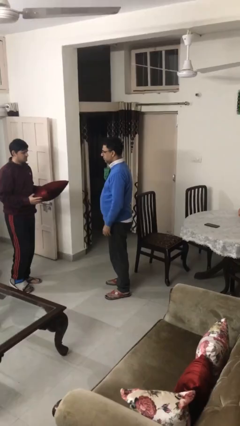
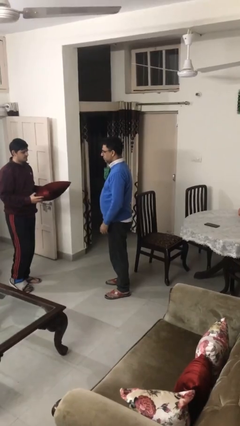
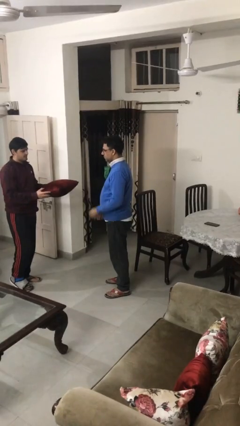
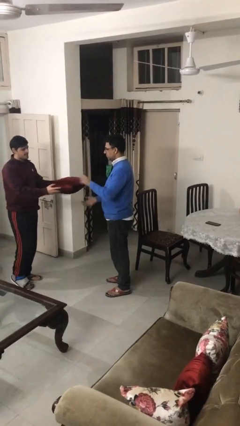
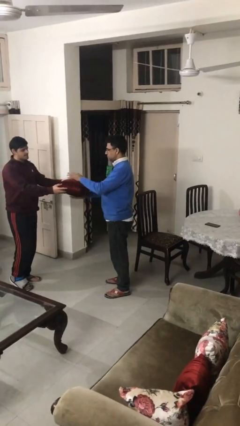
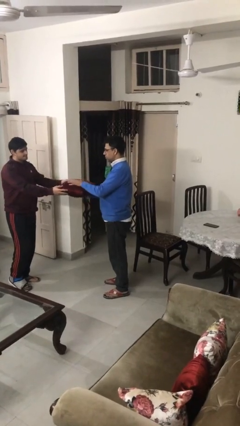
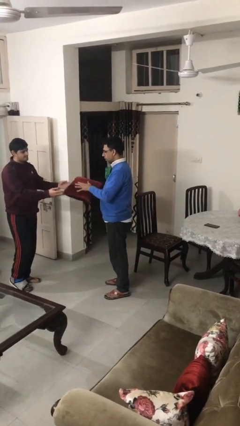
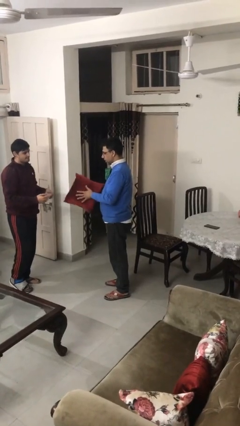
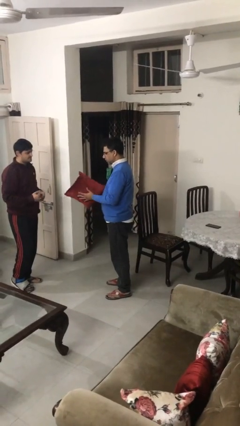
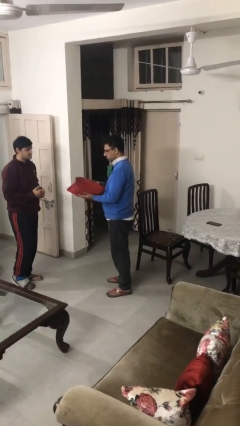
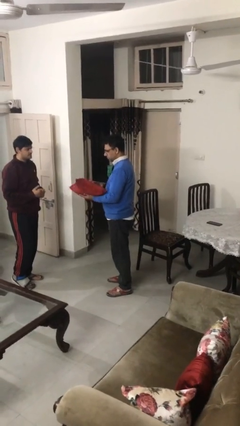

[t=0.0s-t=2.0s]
person transfers object to person

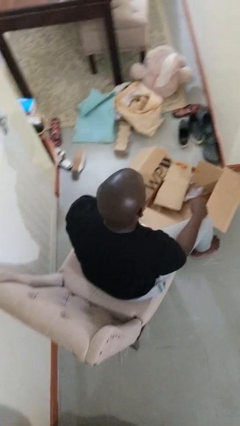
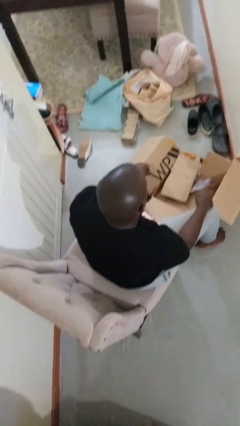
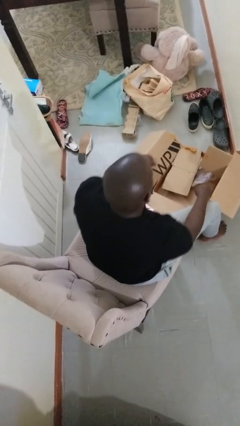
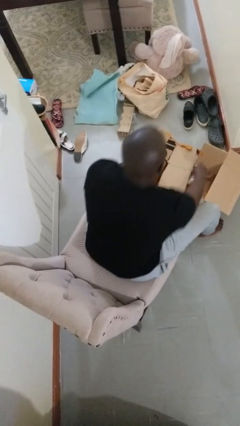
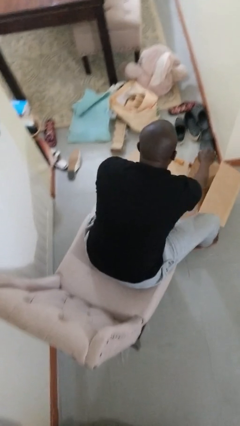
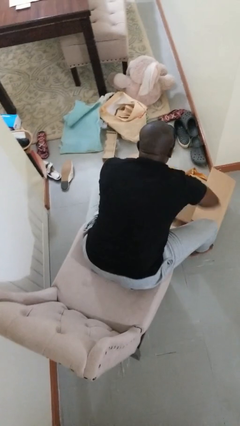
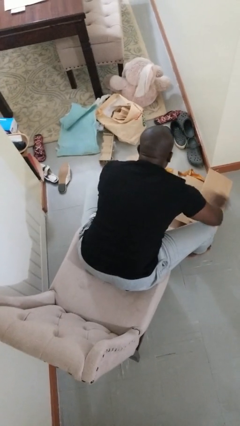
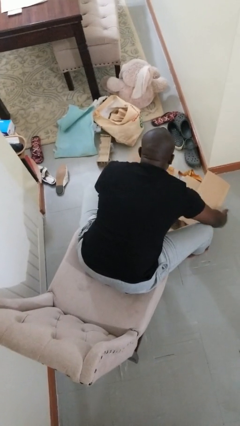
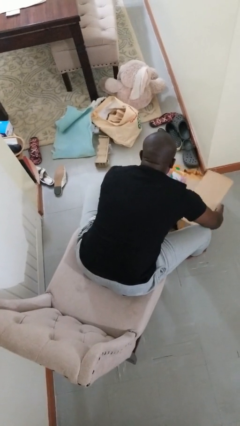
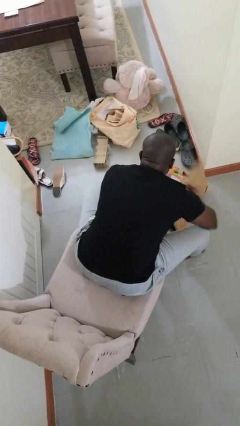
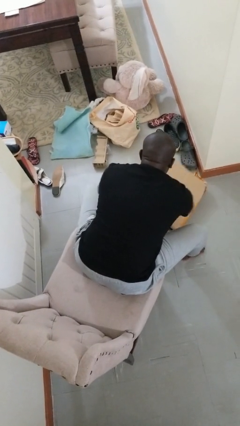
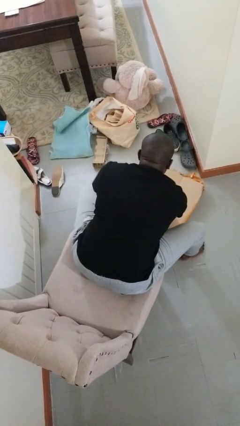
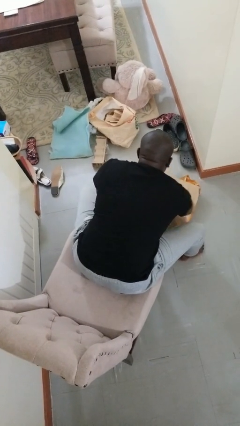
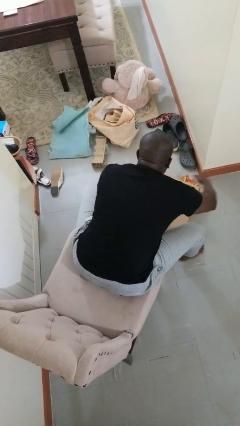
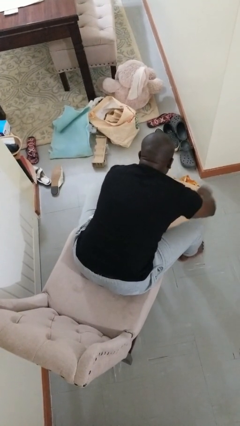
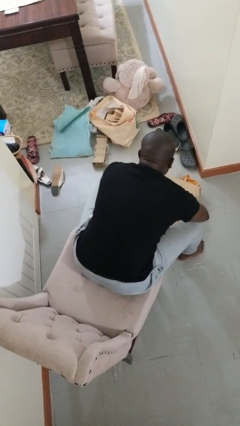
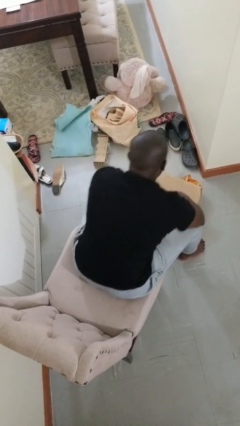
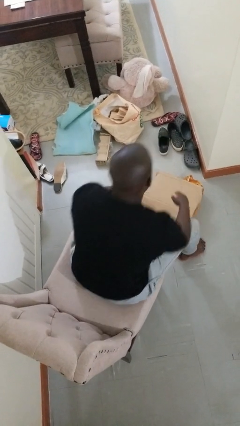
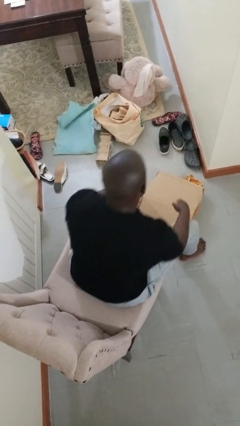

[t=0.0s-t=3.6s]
person closes box

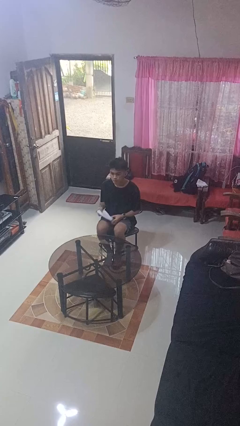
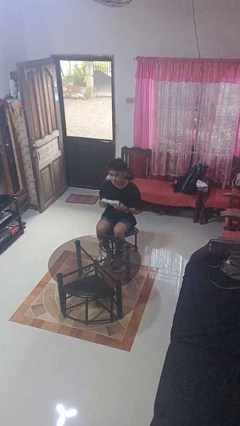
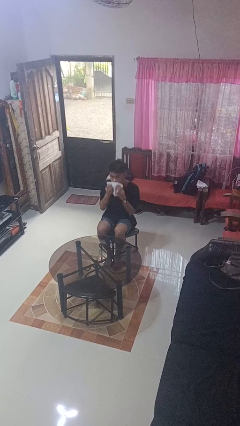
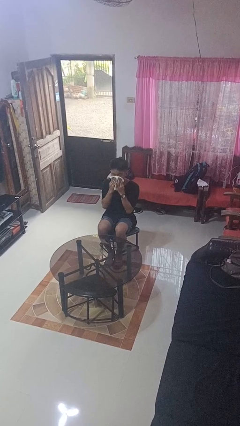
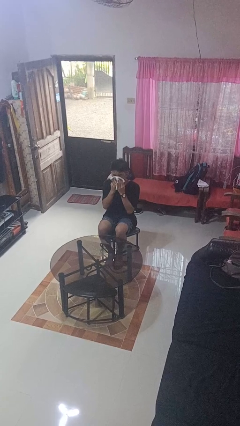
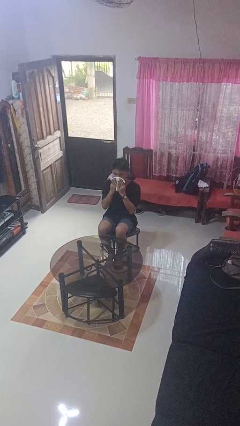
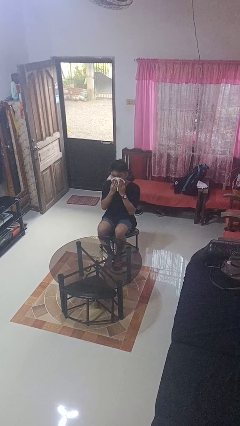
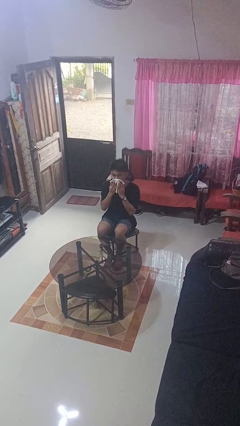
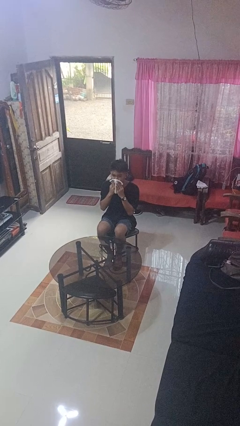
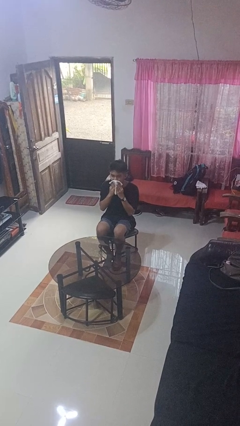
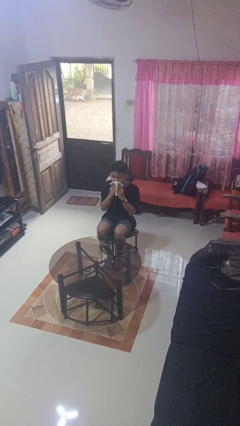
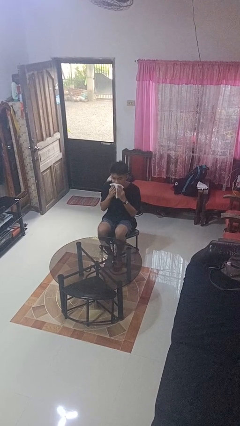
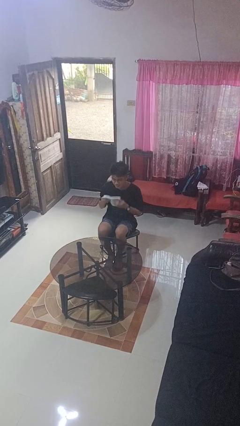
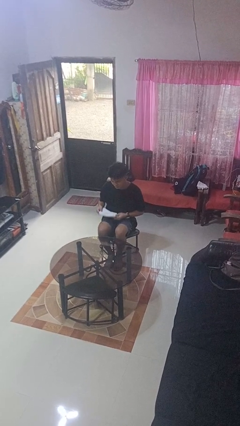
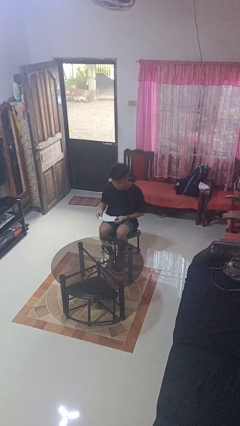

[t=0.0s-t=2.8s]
person wipes mouth with napkin

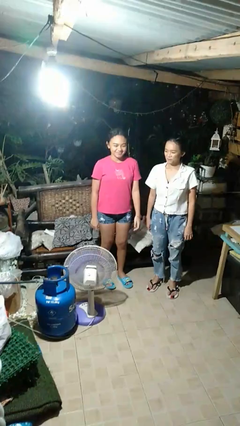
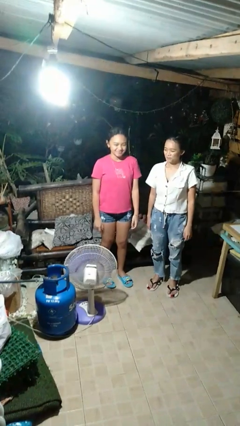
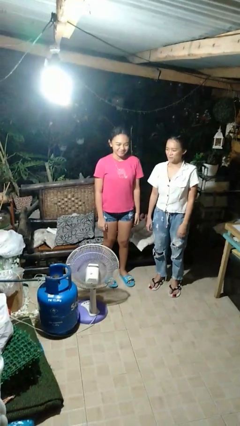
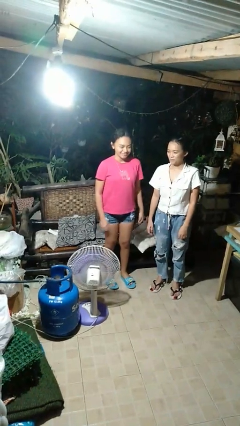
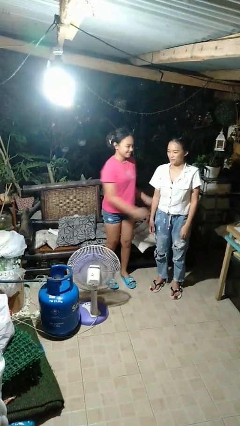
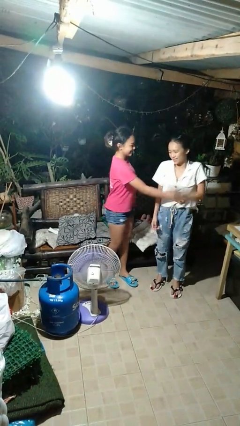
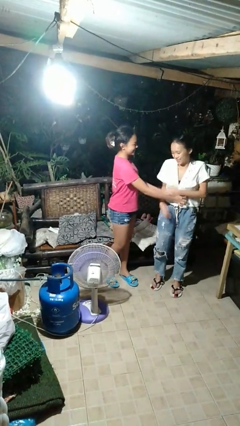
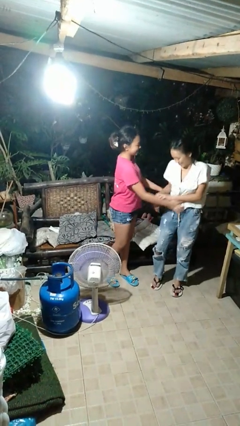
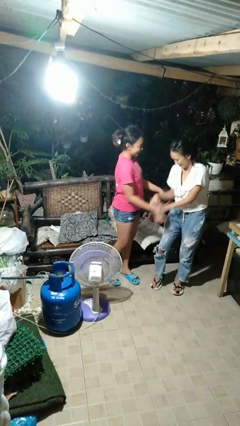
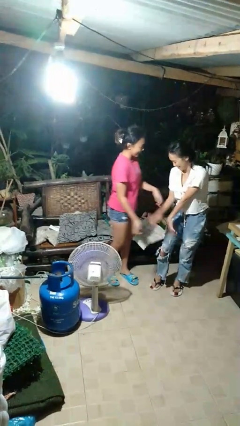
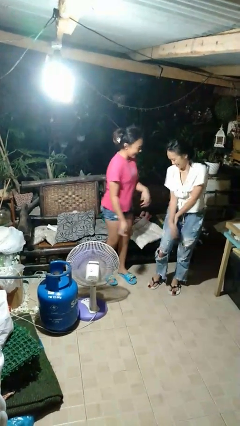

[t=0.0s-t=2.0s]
person tickles person

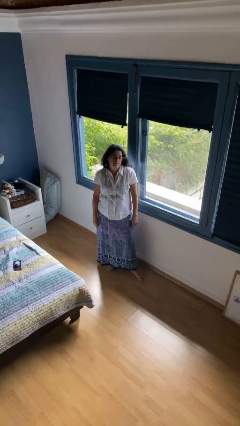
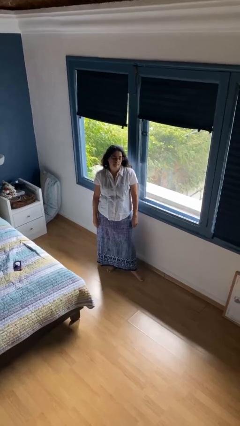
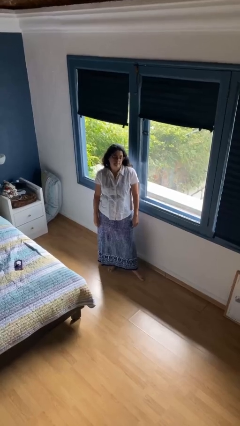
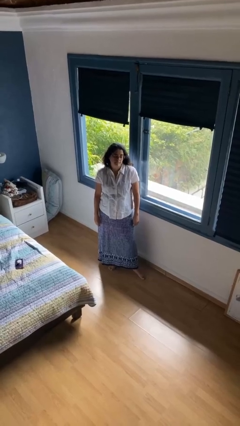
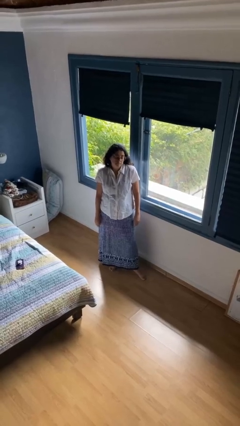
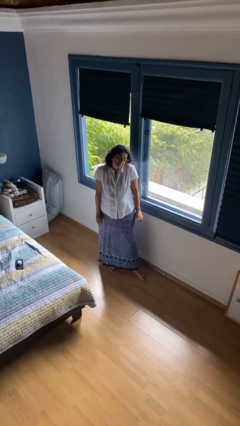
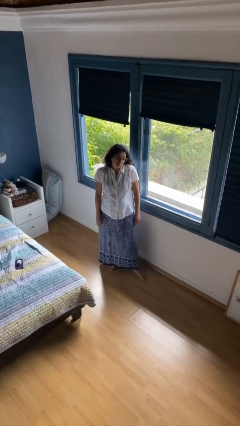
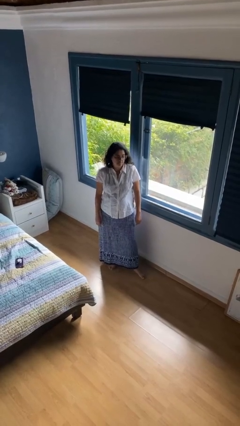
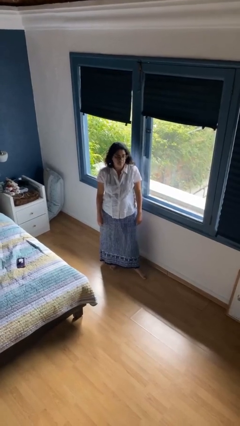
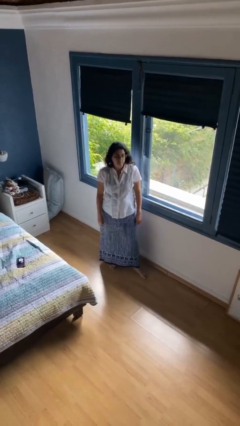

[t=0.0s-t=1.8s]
person shrugs

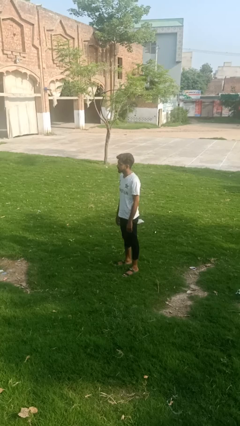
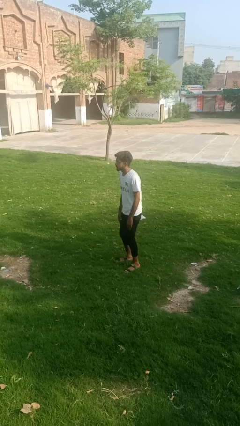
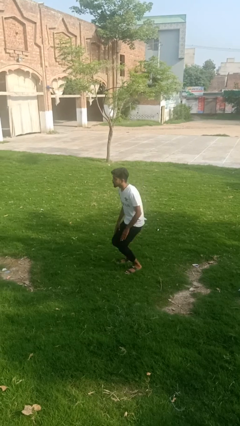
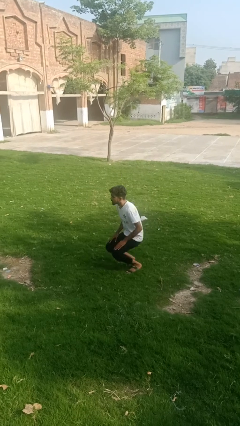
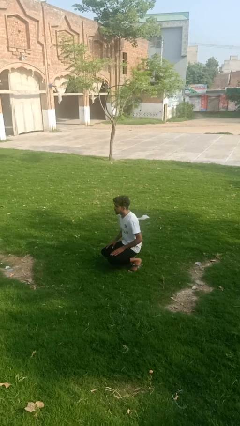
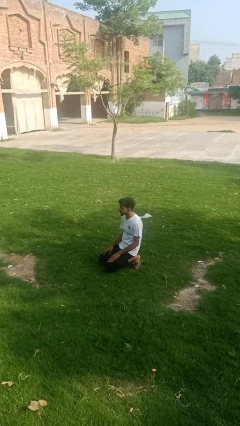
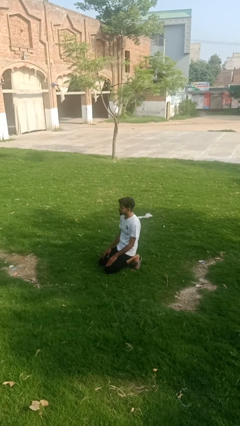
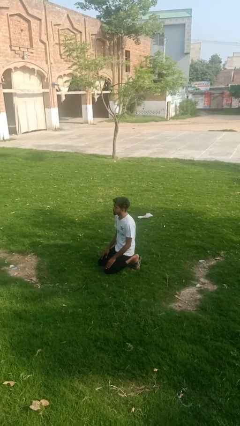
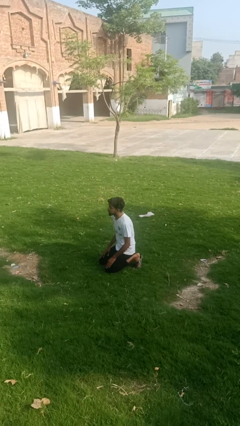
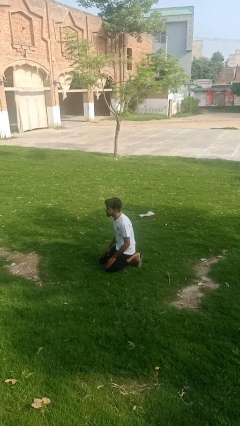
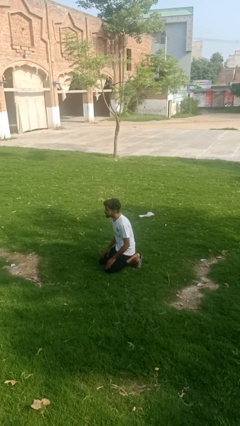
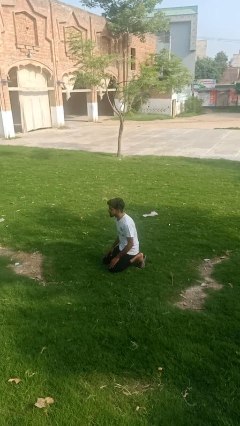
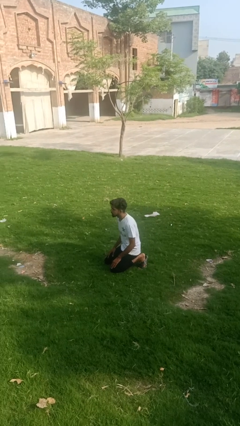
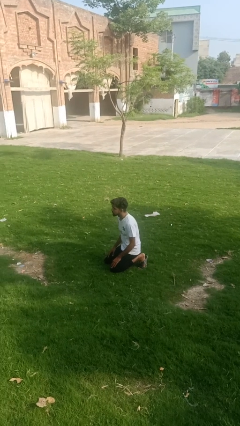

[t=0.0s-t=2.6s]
person kneels

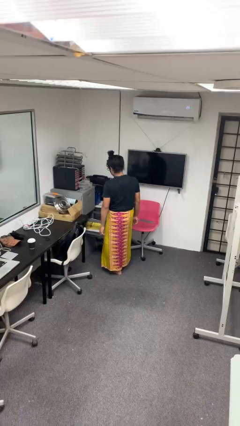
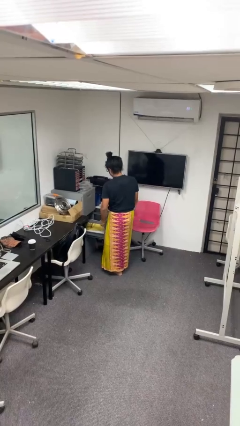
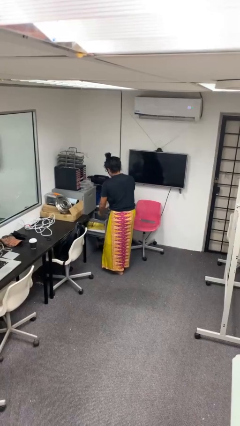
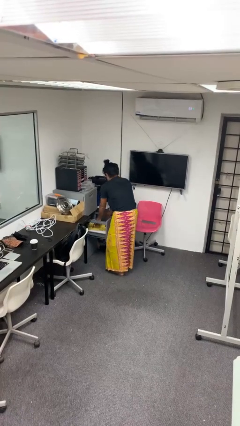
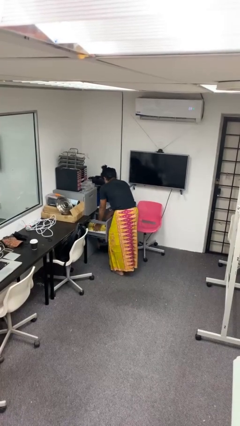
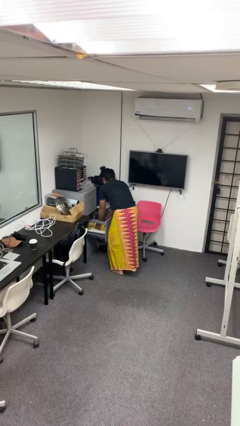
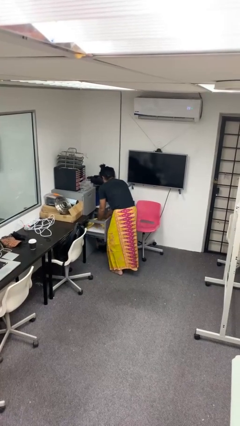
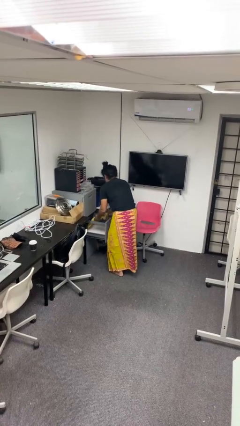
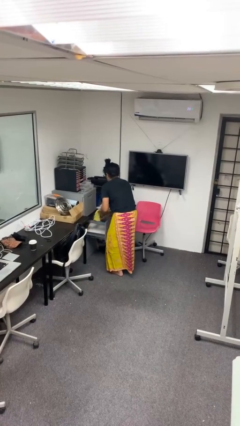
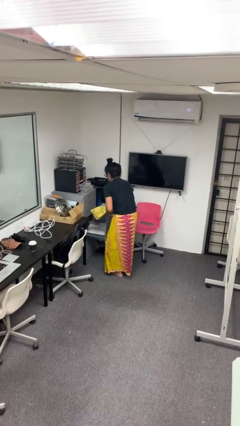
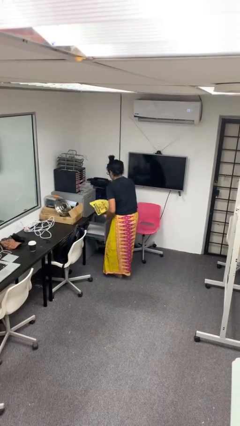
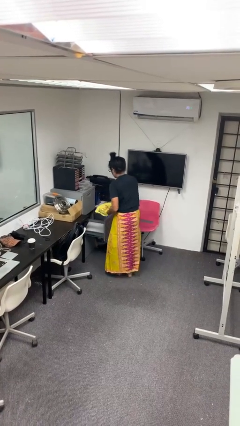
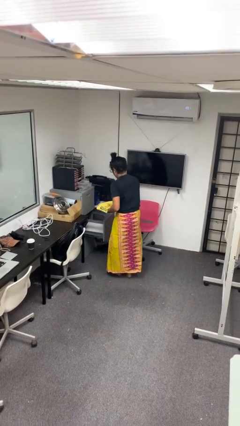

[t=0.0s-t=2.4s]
person takes clothes from dresser
